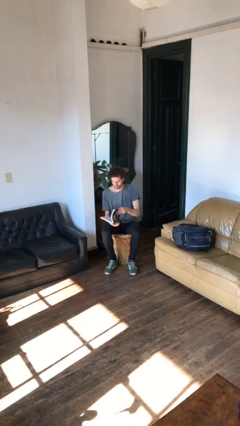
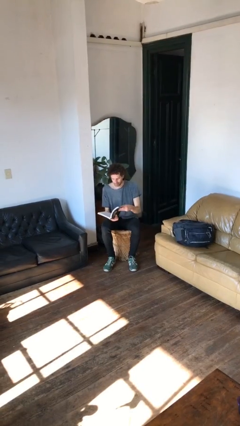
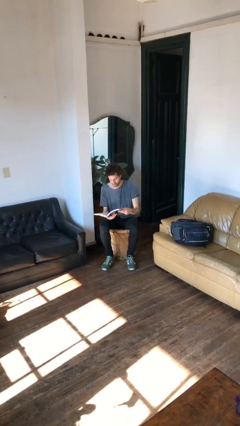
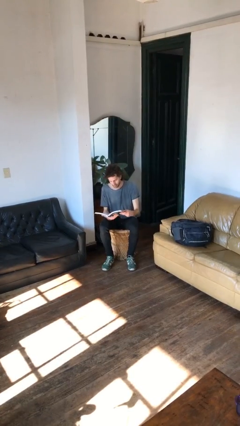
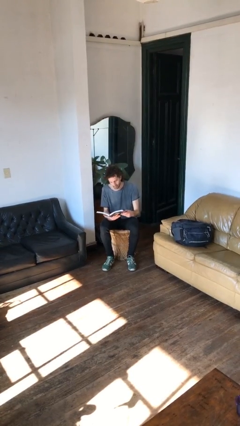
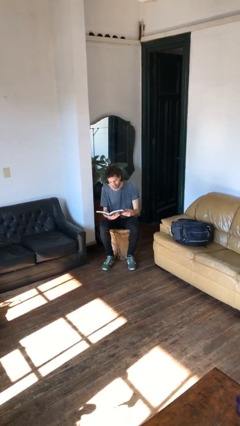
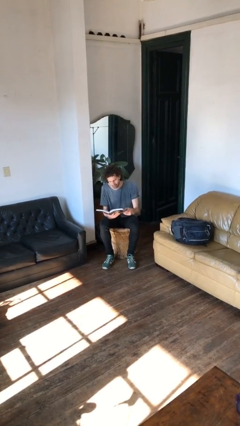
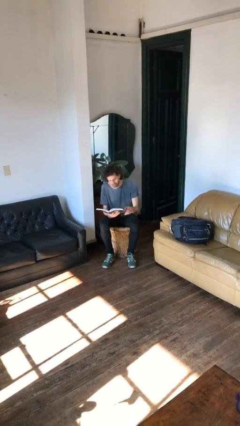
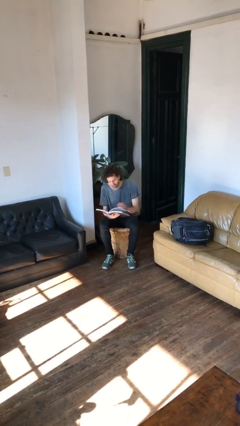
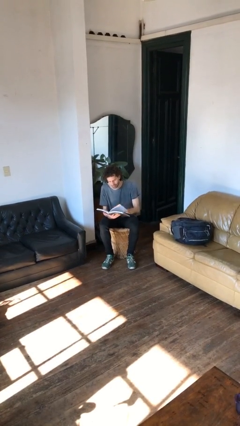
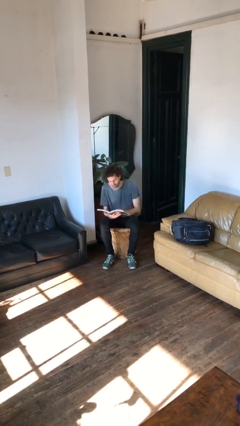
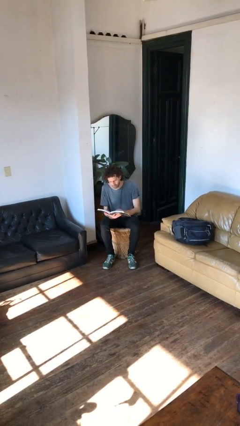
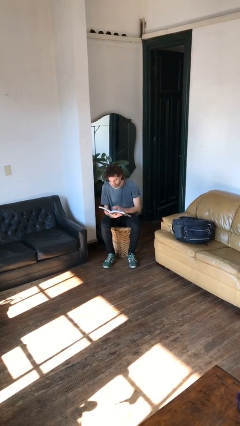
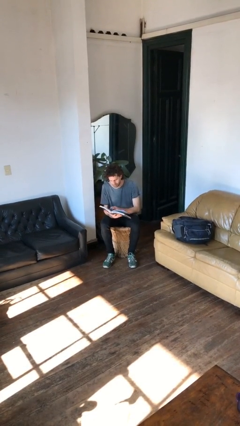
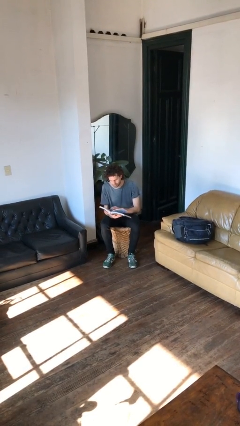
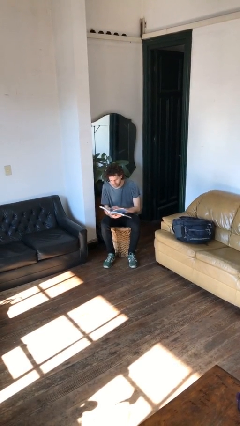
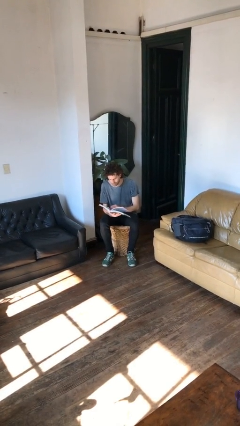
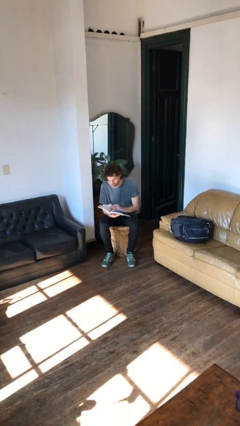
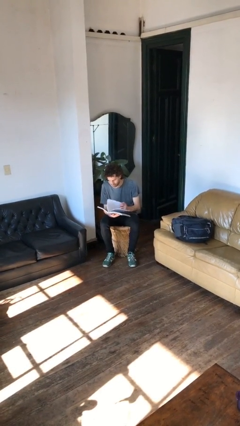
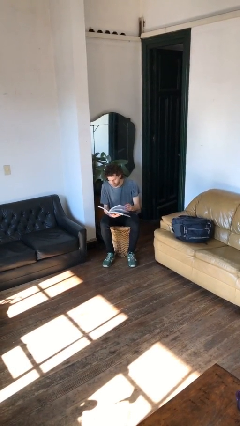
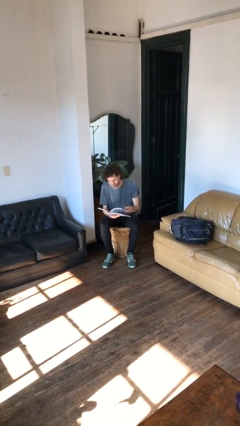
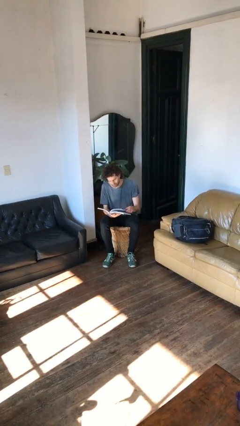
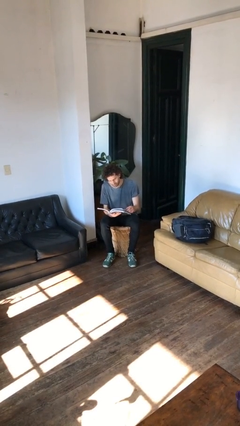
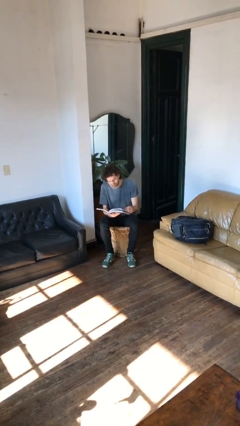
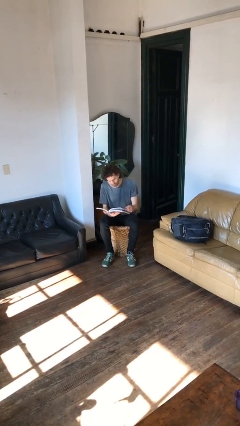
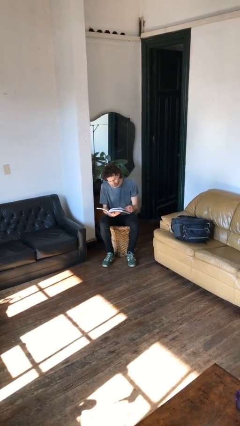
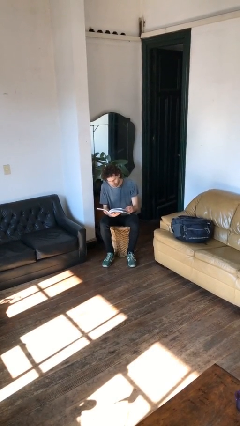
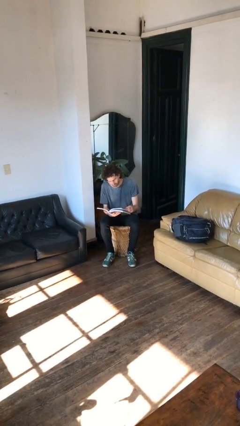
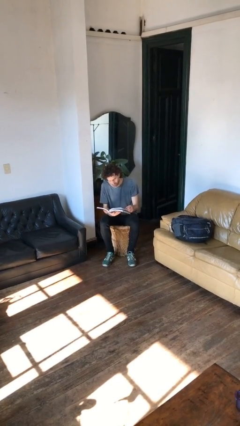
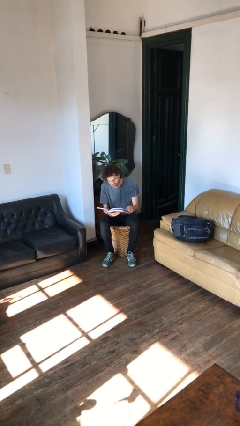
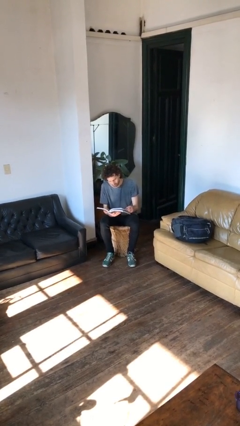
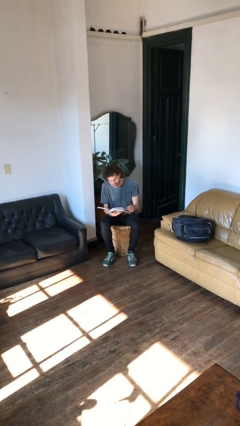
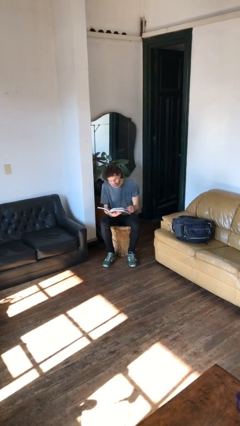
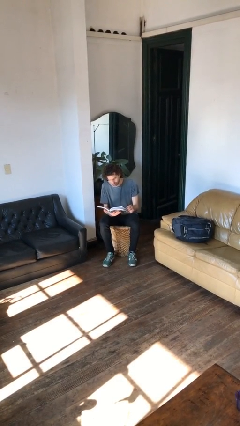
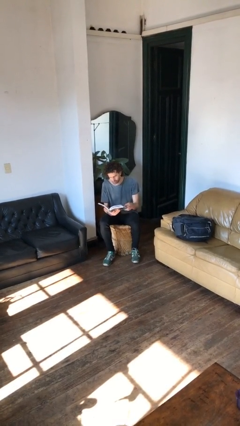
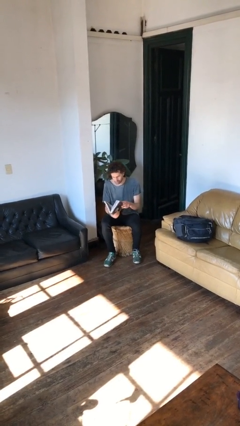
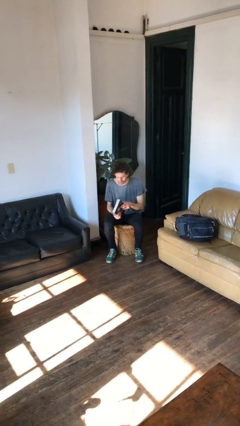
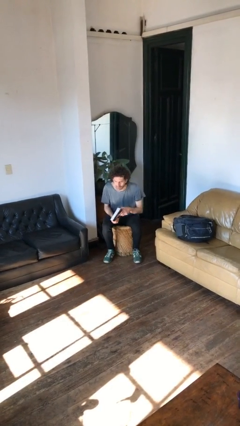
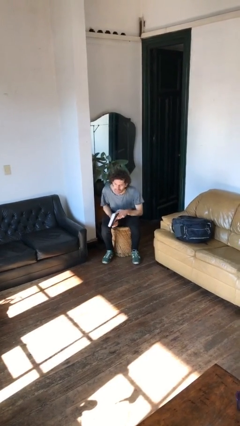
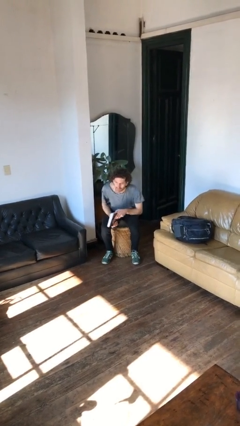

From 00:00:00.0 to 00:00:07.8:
person reads document

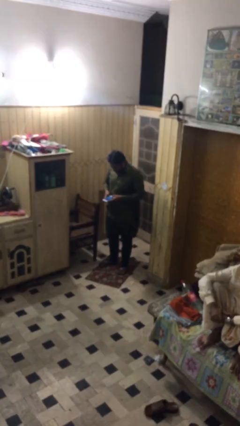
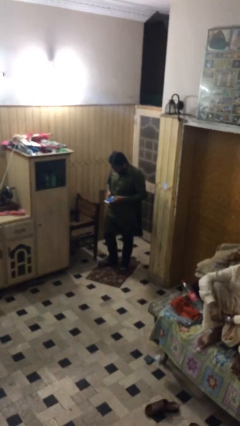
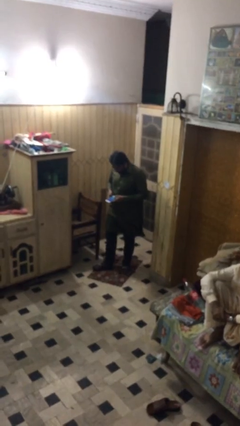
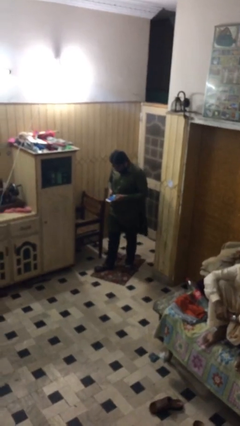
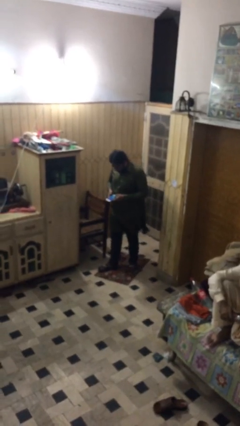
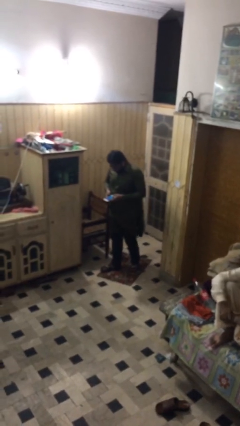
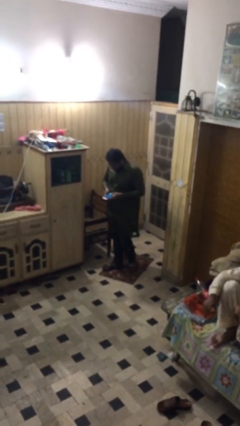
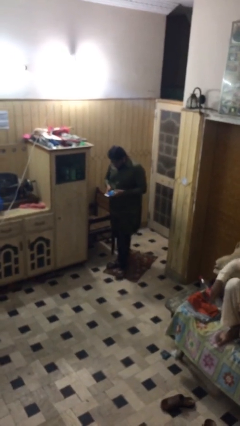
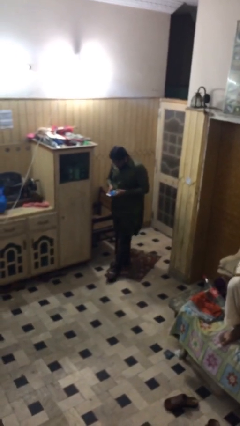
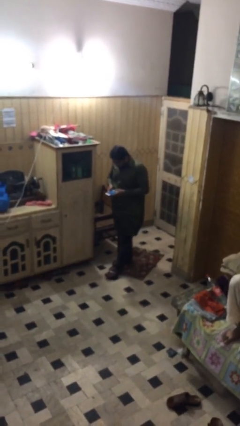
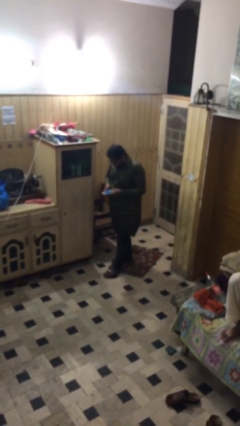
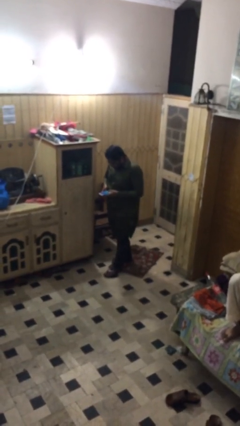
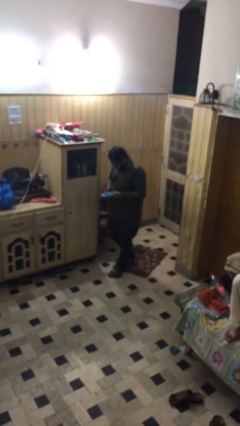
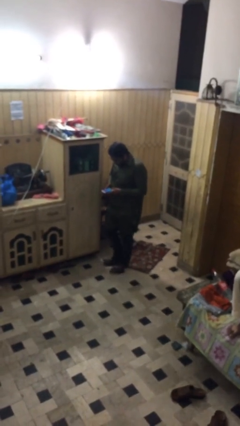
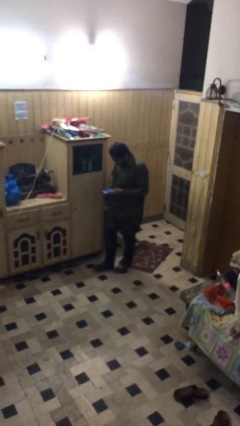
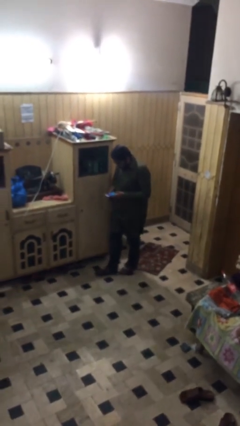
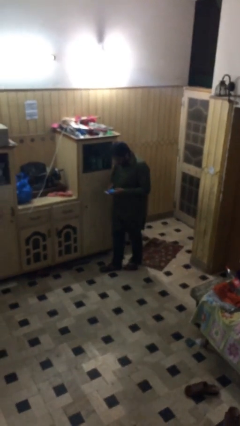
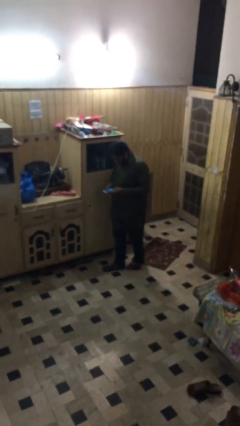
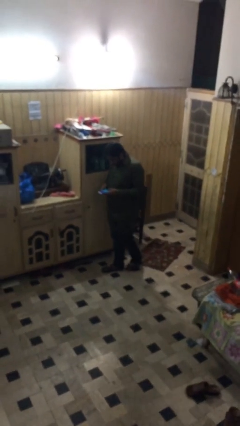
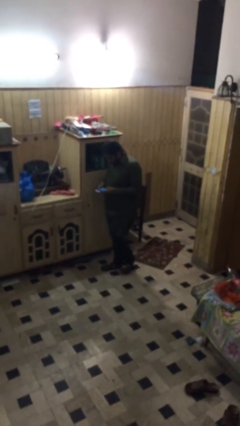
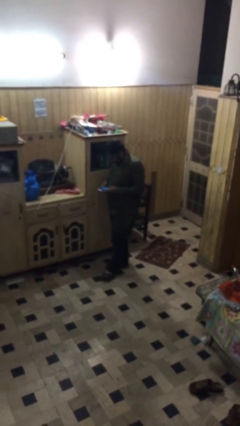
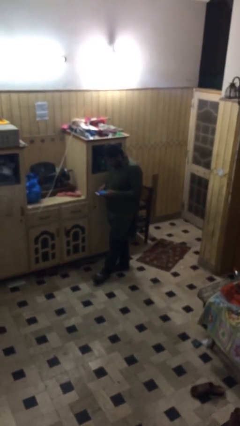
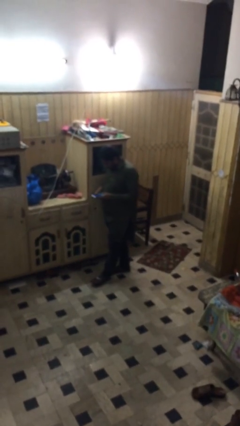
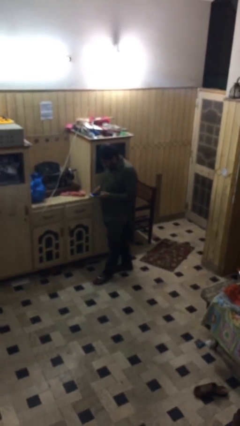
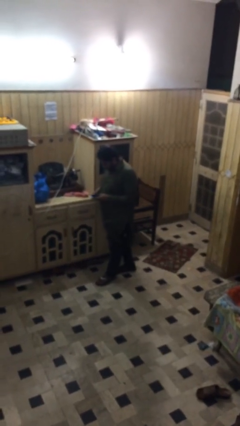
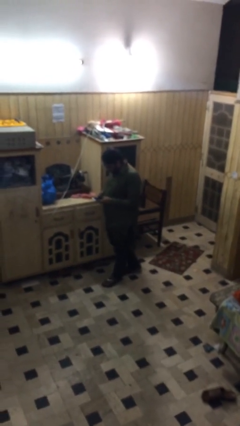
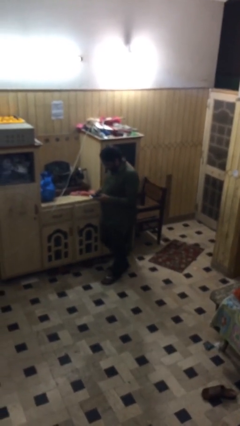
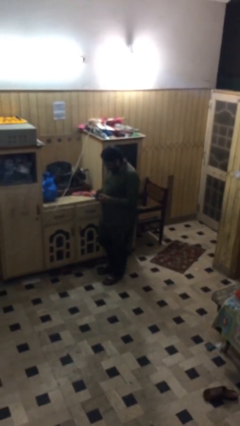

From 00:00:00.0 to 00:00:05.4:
person texts on phone

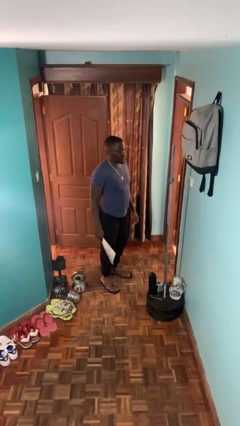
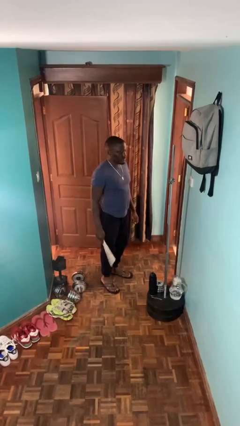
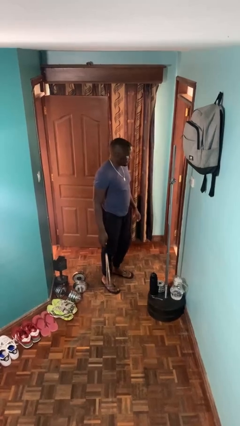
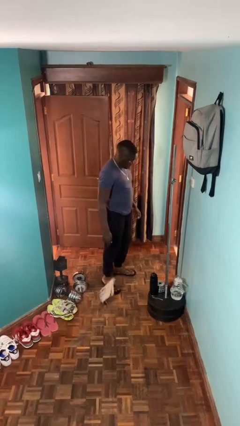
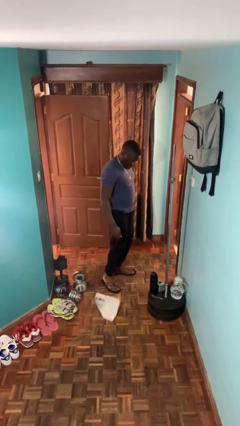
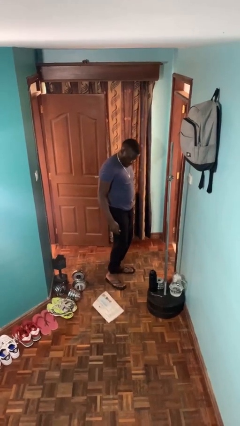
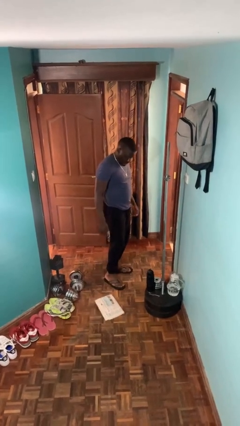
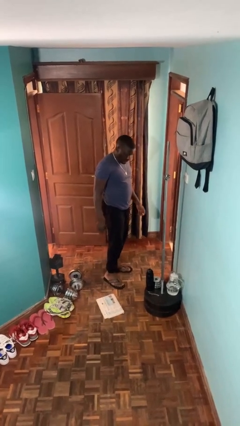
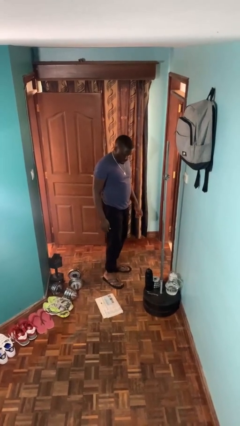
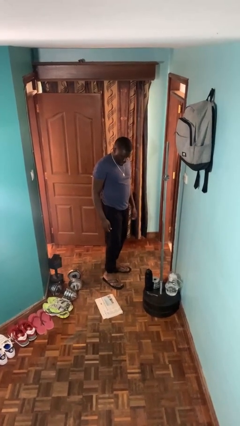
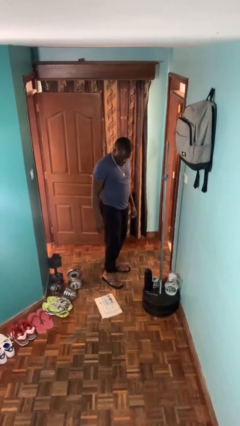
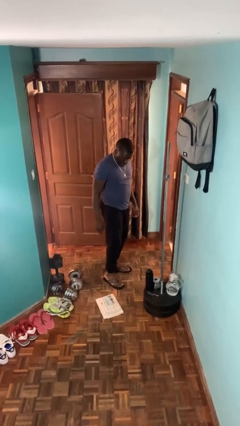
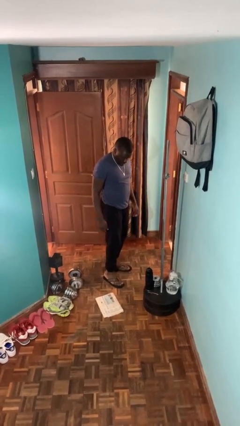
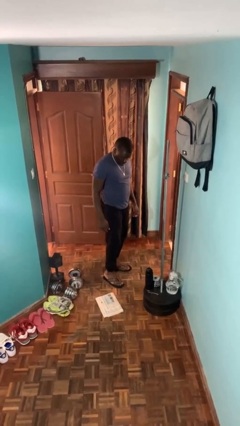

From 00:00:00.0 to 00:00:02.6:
person drops object

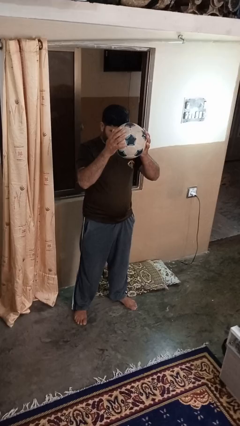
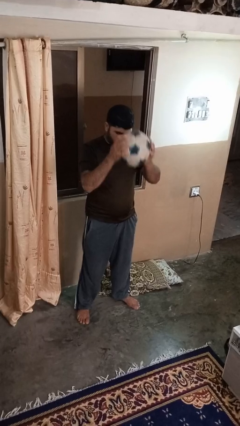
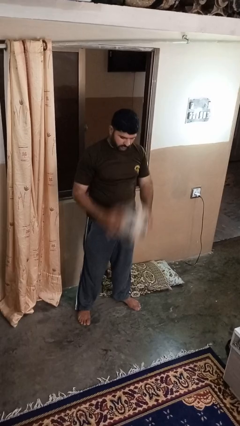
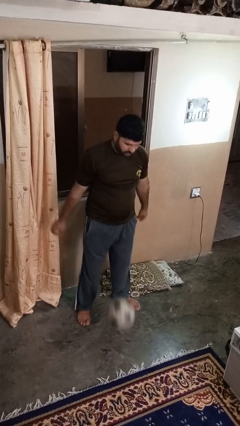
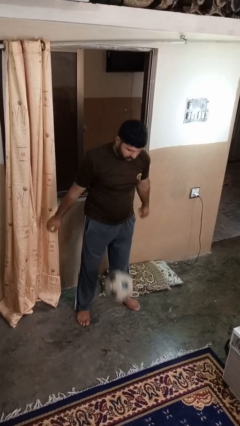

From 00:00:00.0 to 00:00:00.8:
person bounces ball on floor

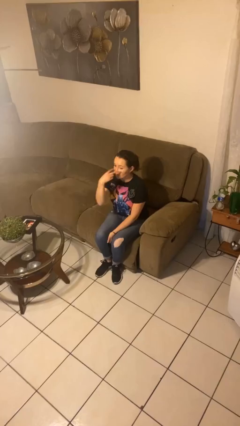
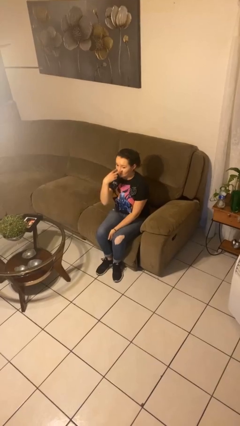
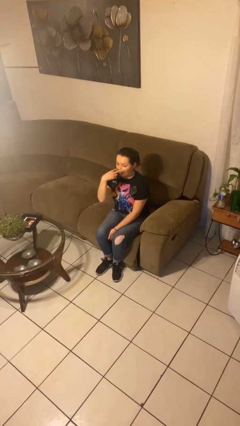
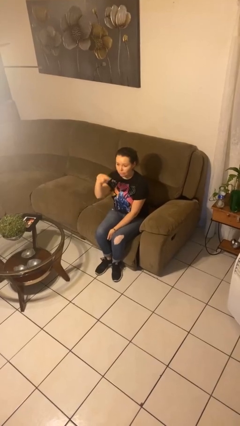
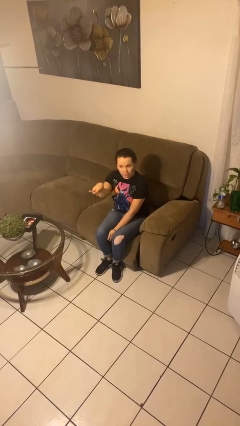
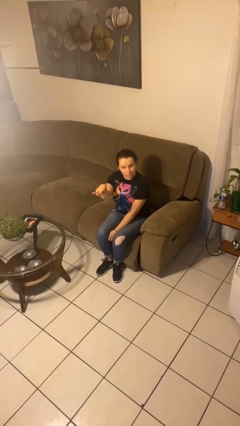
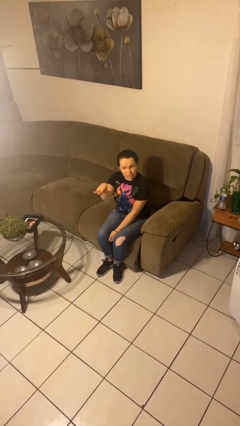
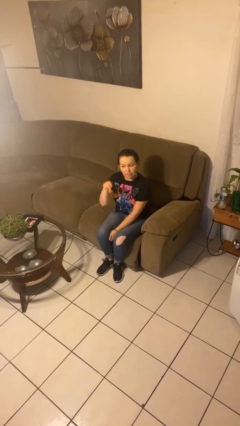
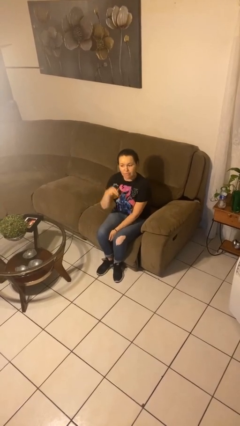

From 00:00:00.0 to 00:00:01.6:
person gestures watch closely
